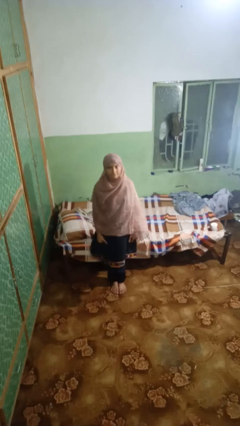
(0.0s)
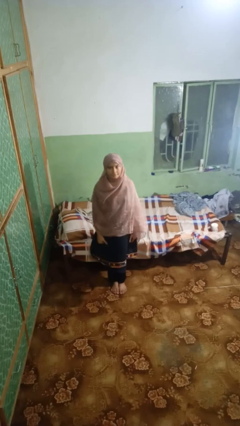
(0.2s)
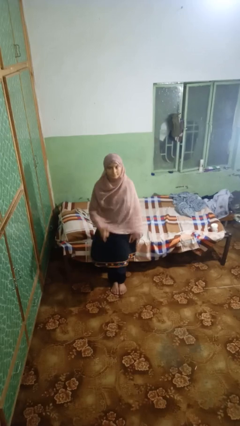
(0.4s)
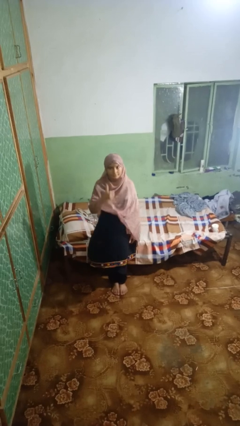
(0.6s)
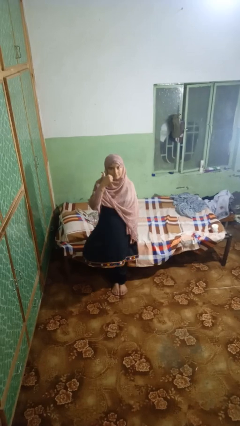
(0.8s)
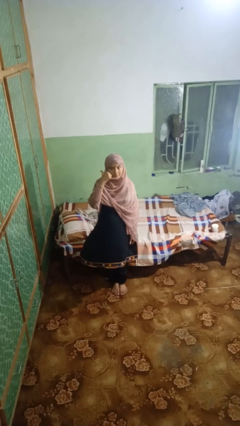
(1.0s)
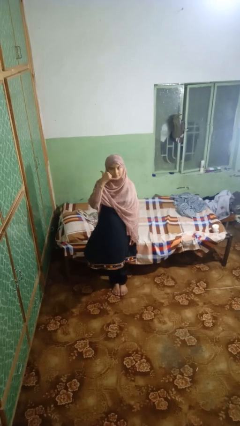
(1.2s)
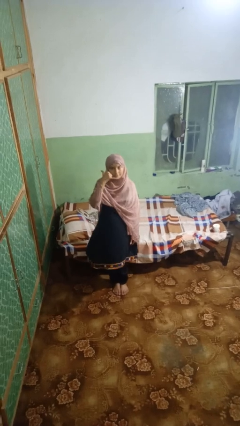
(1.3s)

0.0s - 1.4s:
person gestures call me

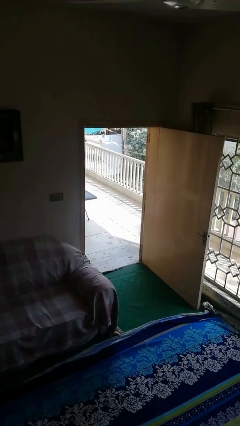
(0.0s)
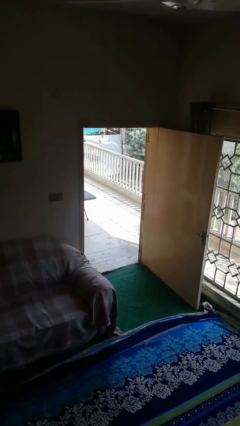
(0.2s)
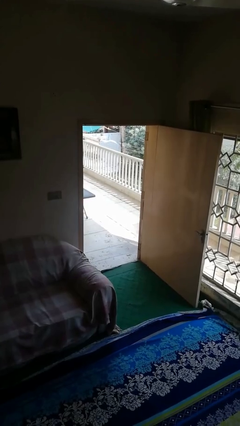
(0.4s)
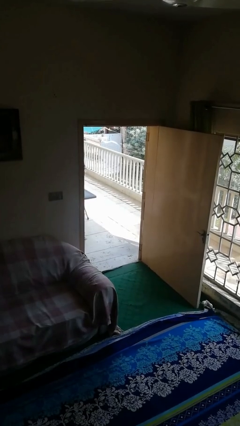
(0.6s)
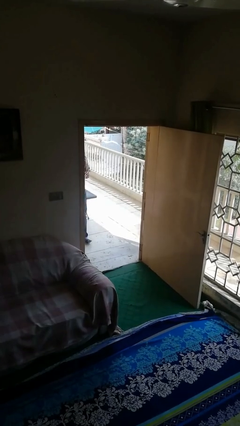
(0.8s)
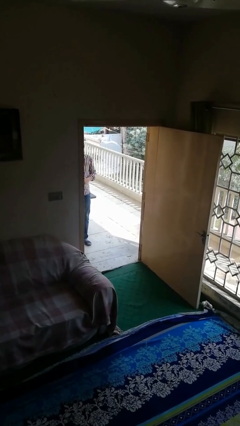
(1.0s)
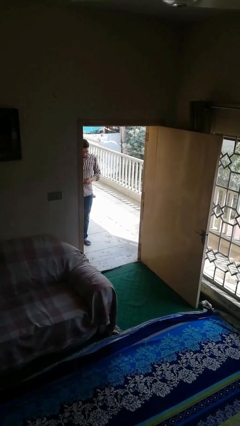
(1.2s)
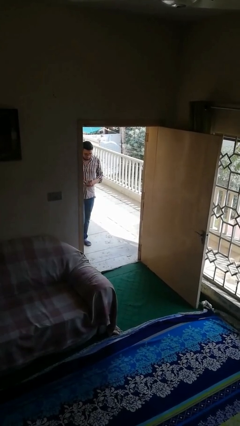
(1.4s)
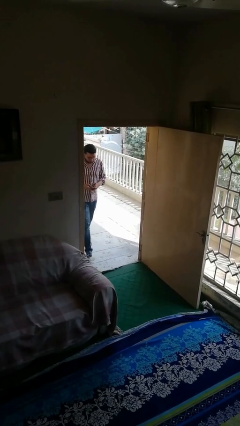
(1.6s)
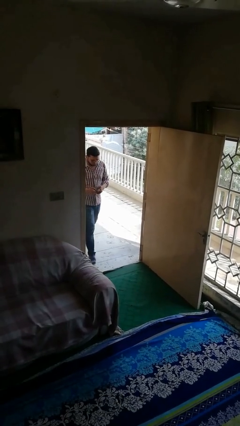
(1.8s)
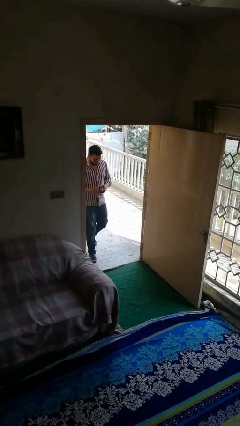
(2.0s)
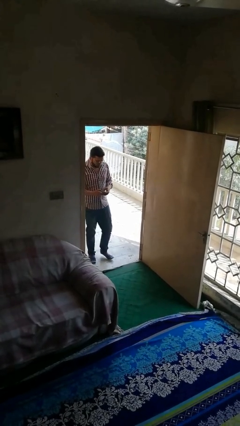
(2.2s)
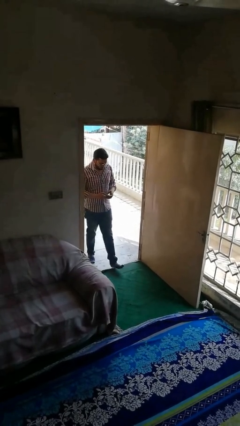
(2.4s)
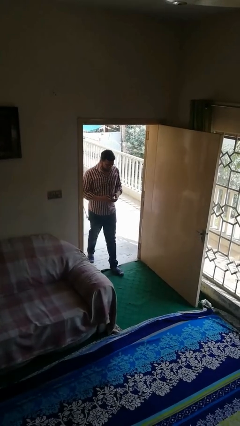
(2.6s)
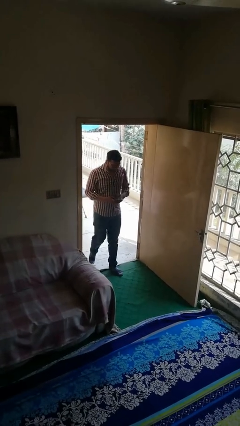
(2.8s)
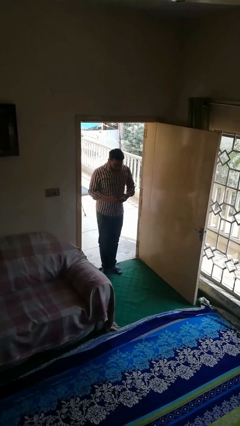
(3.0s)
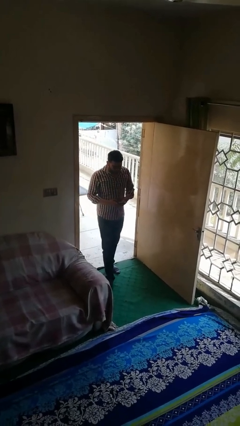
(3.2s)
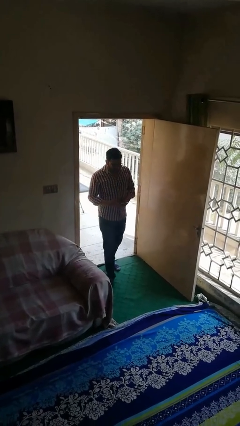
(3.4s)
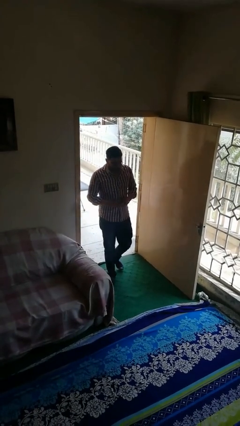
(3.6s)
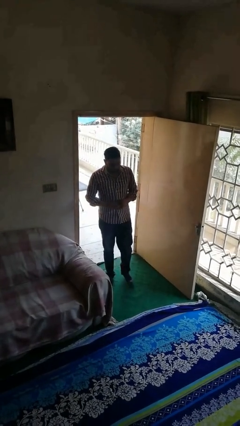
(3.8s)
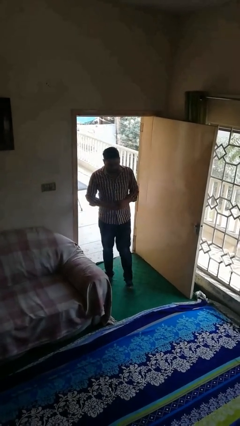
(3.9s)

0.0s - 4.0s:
person enters scene through structure

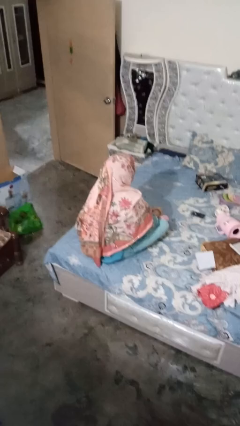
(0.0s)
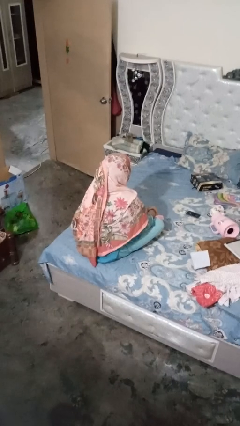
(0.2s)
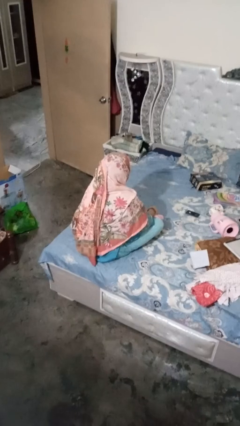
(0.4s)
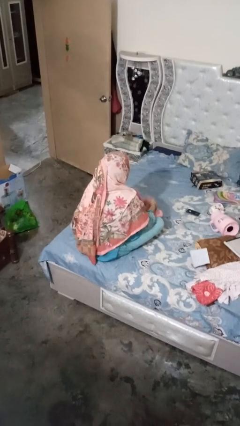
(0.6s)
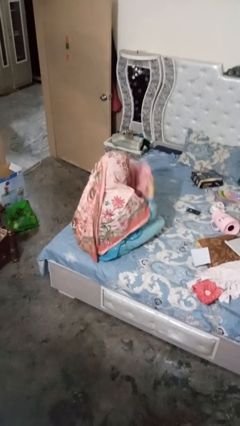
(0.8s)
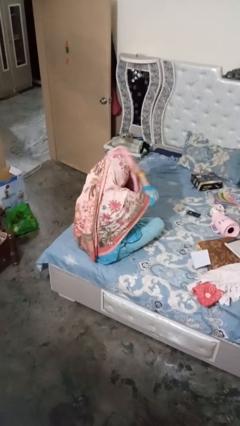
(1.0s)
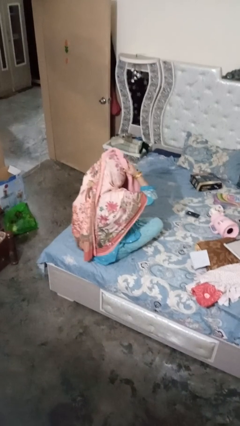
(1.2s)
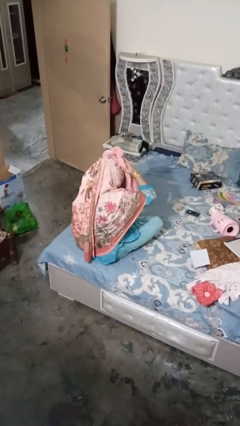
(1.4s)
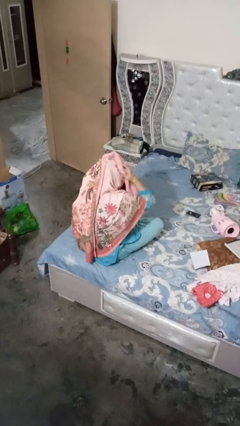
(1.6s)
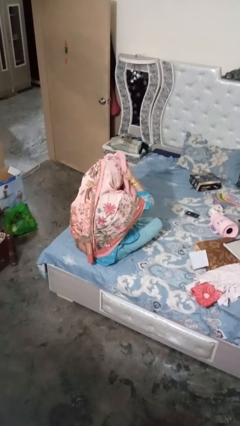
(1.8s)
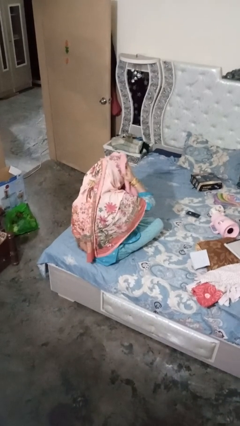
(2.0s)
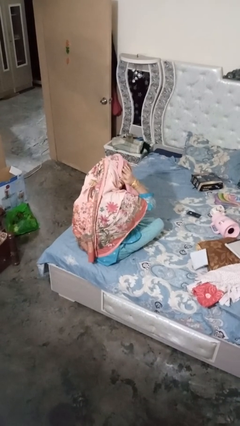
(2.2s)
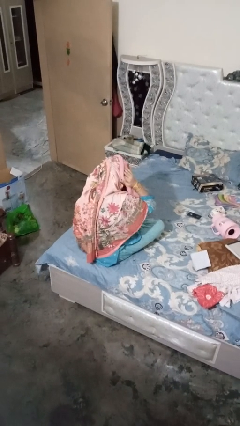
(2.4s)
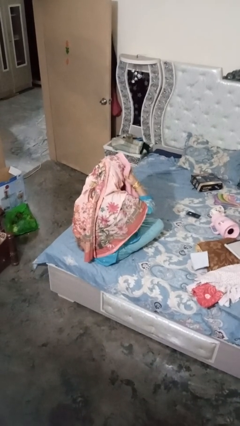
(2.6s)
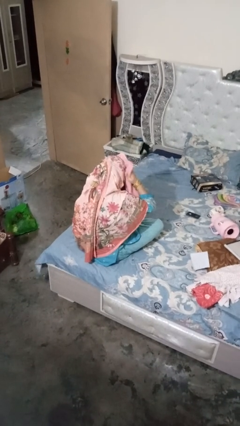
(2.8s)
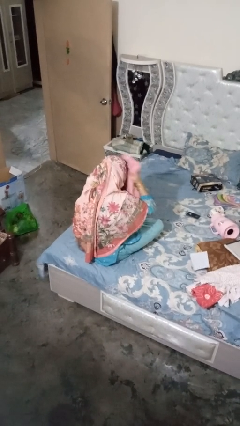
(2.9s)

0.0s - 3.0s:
person dries hair with hairdryer

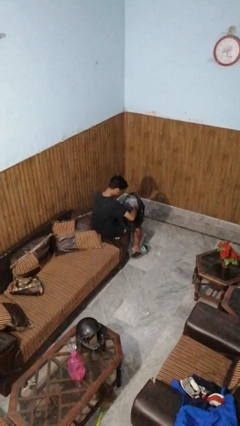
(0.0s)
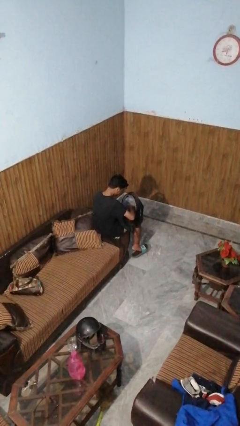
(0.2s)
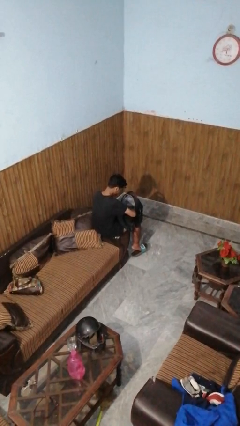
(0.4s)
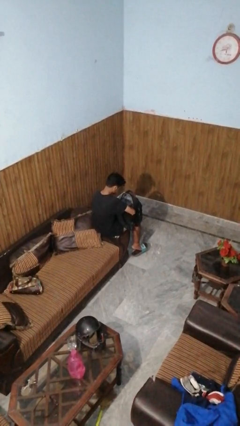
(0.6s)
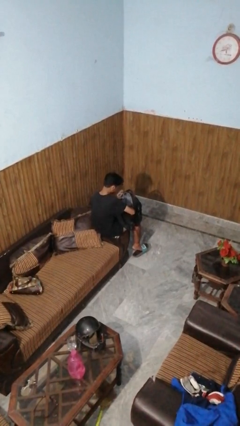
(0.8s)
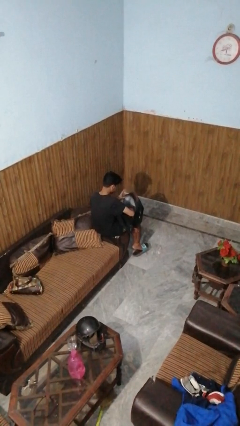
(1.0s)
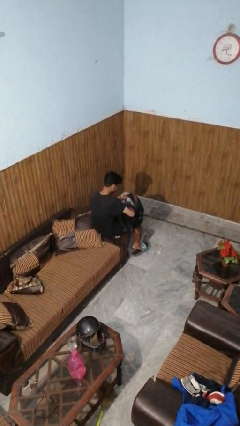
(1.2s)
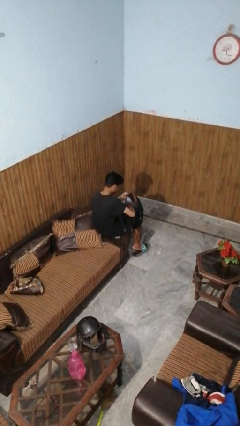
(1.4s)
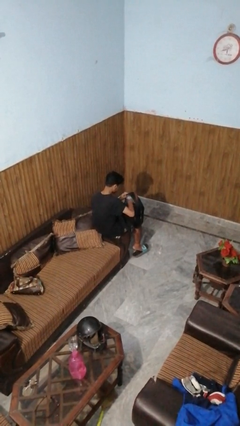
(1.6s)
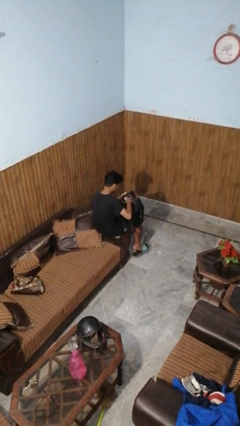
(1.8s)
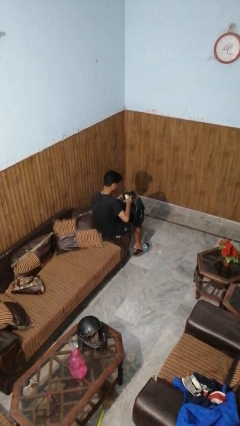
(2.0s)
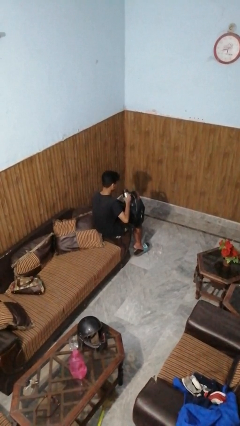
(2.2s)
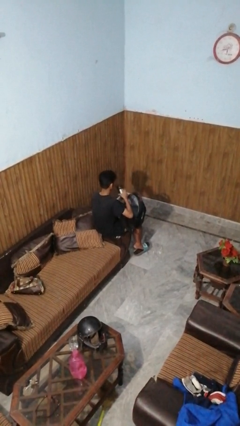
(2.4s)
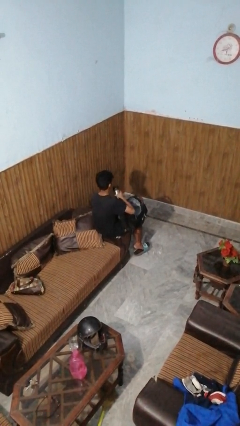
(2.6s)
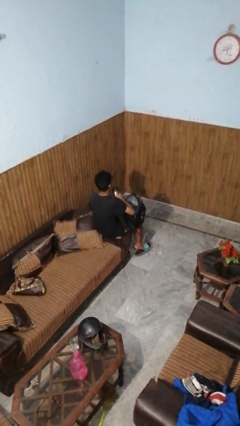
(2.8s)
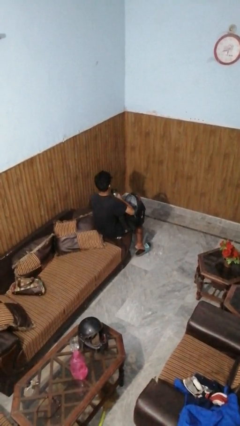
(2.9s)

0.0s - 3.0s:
person takes object from backpack

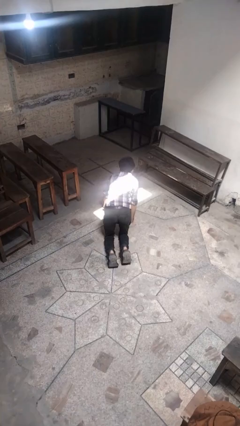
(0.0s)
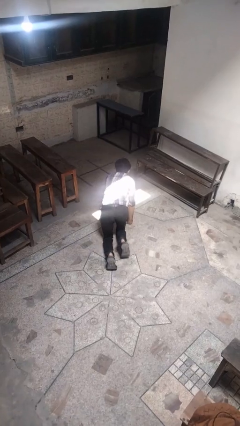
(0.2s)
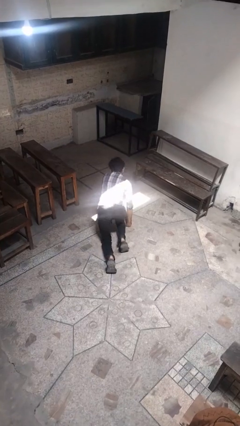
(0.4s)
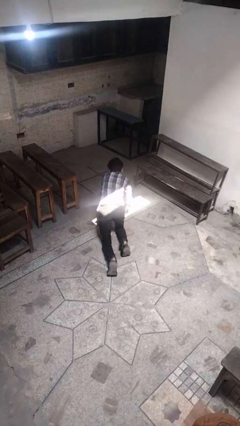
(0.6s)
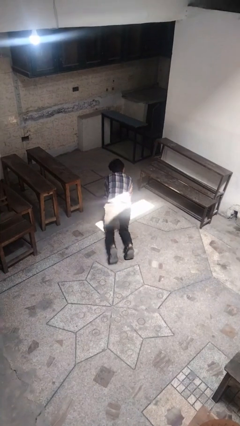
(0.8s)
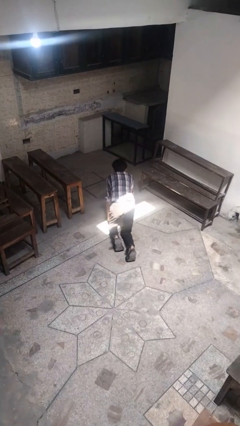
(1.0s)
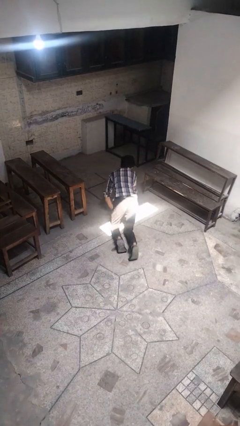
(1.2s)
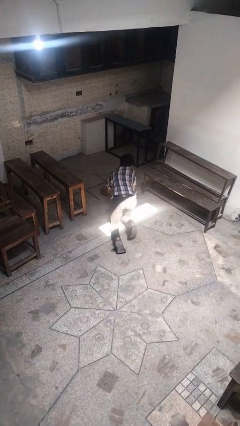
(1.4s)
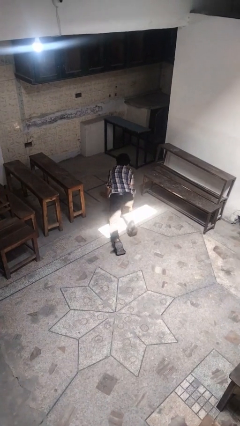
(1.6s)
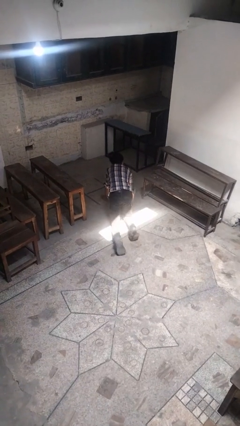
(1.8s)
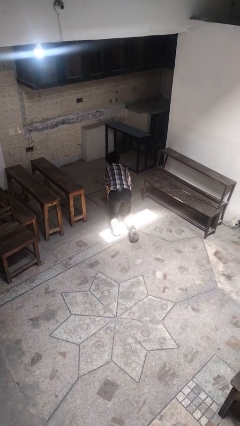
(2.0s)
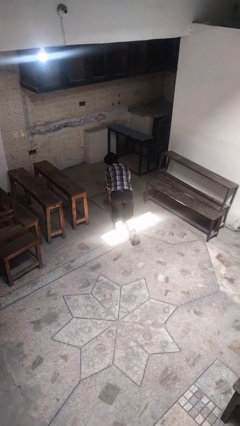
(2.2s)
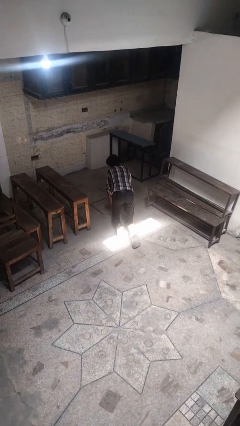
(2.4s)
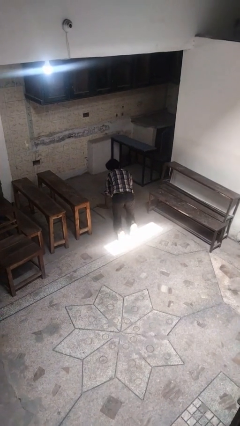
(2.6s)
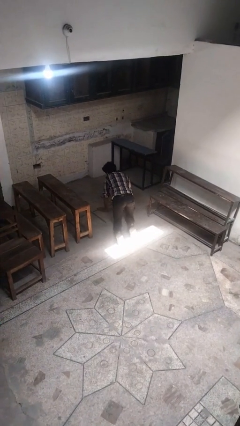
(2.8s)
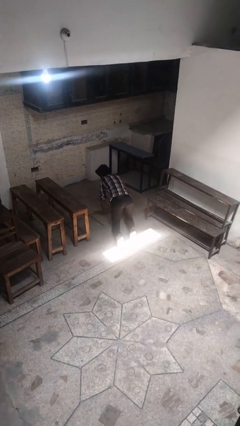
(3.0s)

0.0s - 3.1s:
person crawls

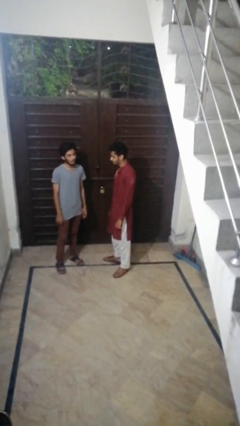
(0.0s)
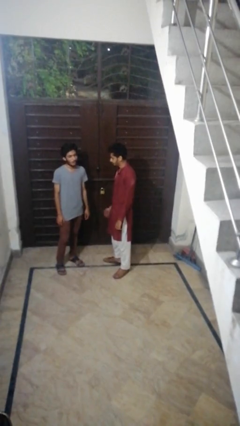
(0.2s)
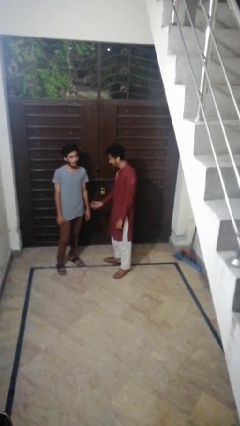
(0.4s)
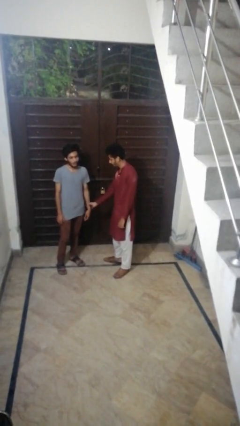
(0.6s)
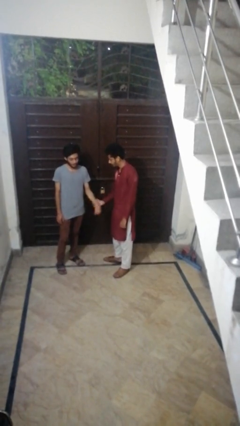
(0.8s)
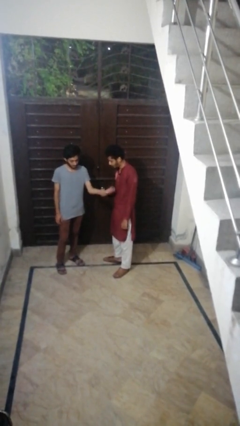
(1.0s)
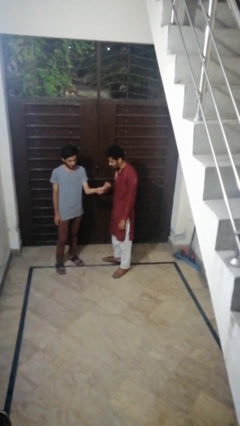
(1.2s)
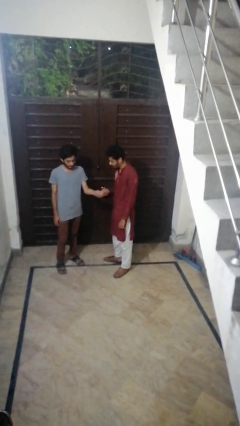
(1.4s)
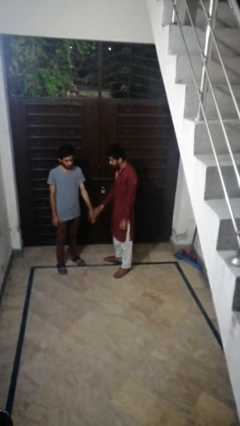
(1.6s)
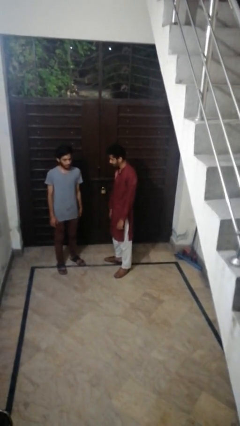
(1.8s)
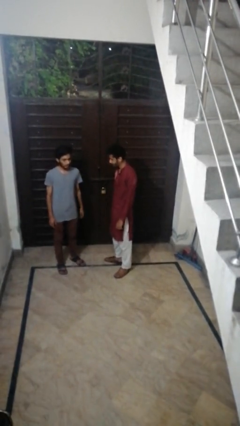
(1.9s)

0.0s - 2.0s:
person grabs person by forearm

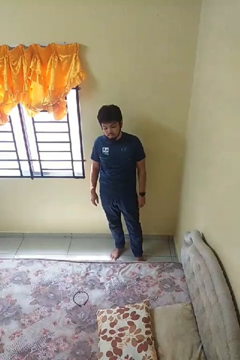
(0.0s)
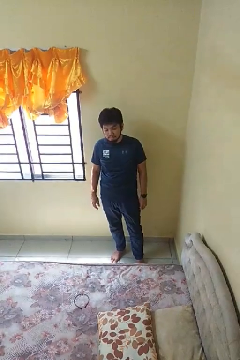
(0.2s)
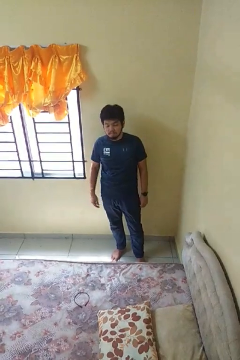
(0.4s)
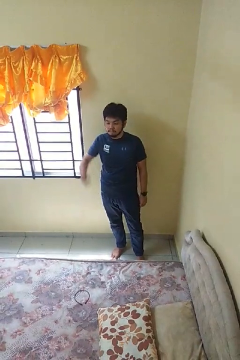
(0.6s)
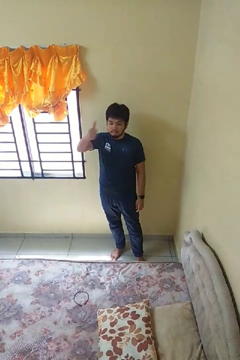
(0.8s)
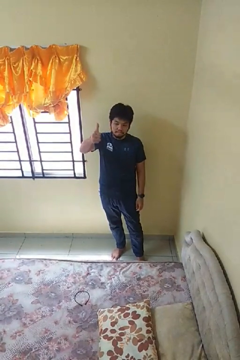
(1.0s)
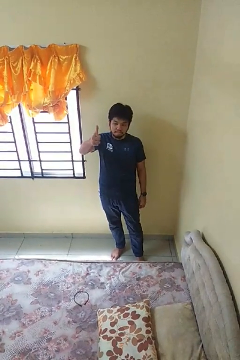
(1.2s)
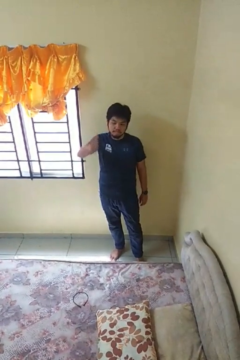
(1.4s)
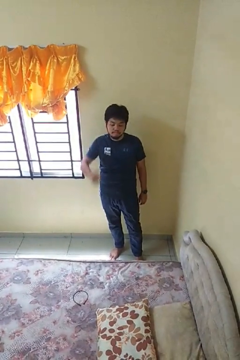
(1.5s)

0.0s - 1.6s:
person gestures thumbs up
